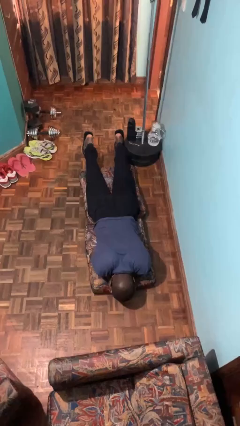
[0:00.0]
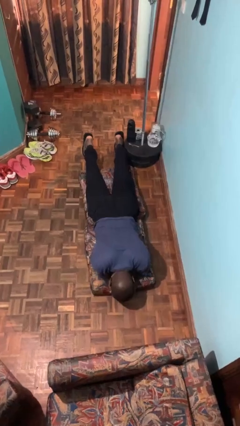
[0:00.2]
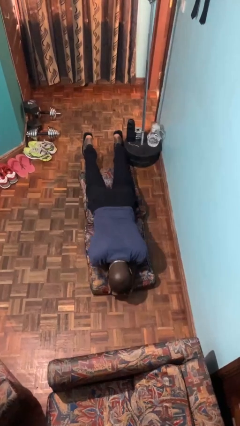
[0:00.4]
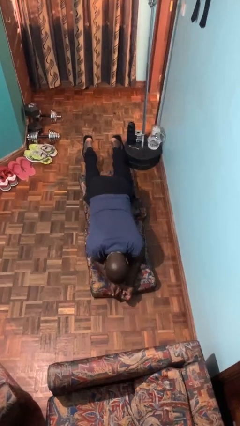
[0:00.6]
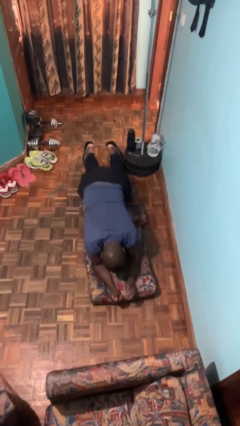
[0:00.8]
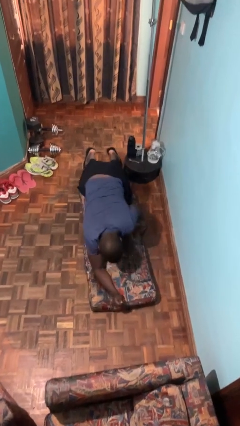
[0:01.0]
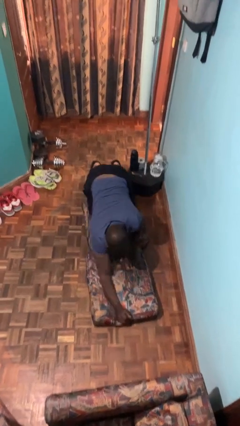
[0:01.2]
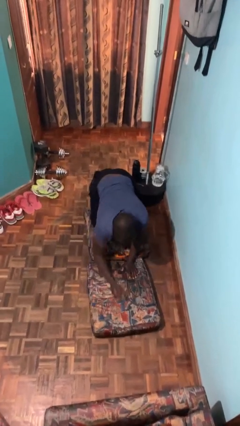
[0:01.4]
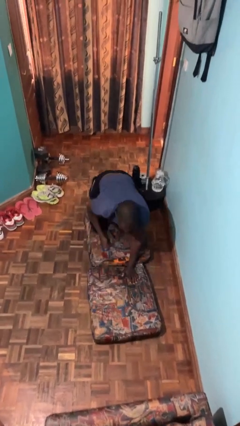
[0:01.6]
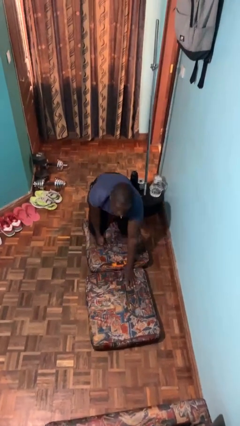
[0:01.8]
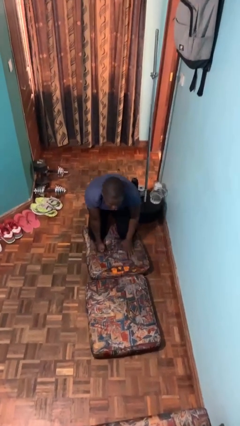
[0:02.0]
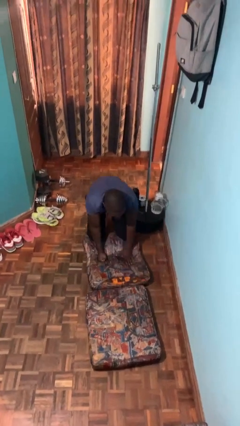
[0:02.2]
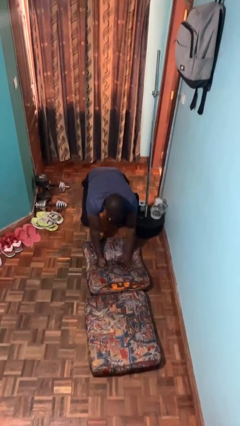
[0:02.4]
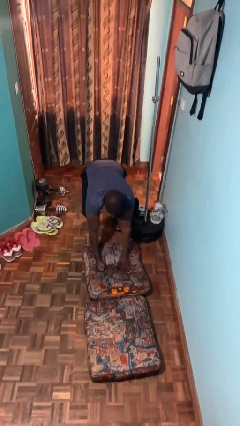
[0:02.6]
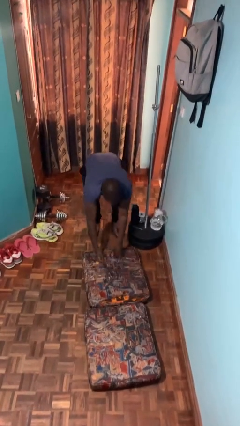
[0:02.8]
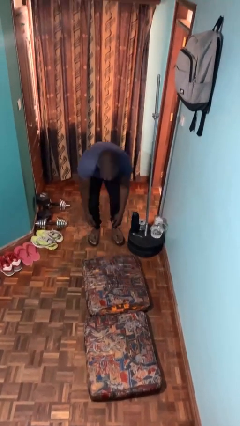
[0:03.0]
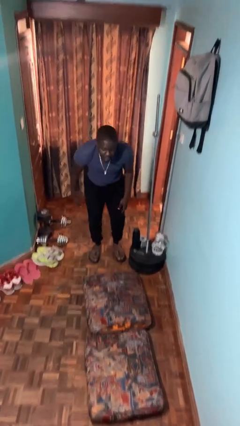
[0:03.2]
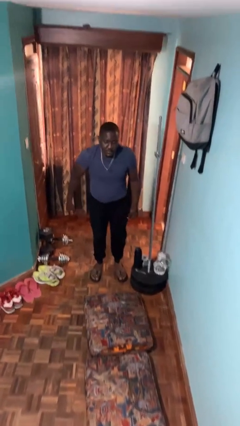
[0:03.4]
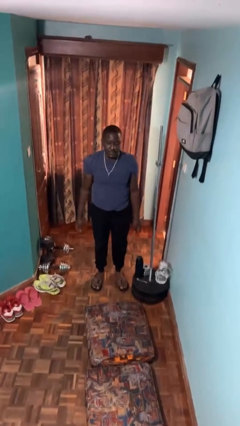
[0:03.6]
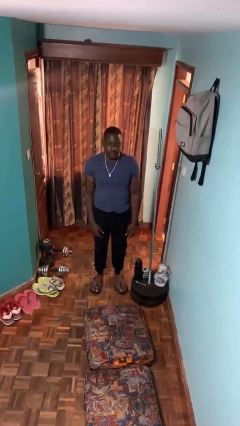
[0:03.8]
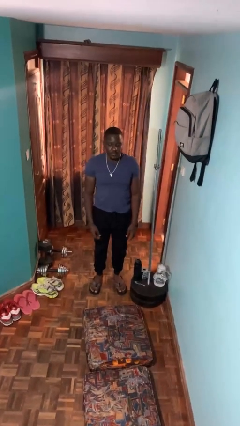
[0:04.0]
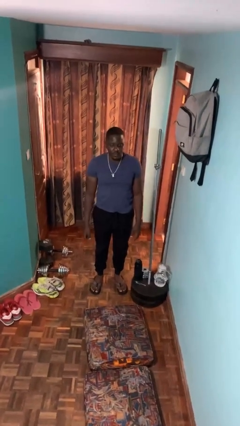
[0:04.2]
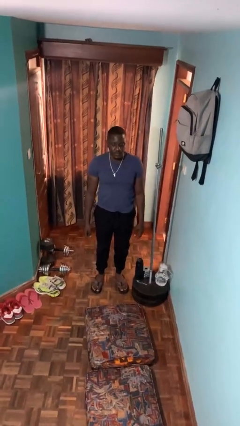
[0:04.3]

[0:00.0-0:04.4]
person stands up from floor

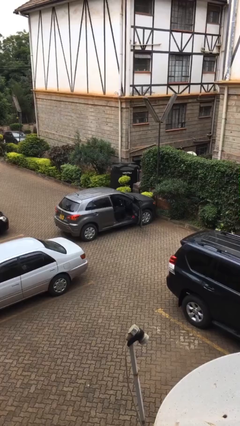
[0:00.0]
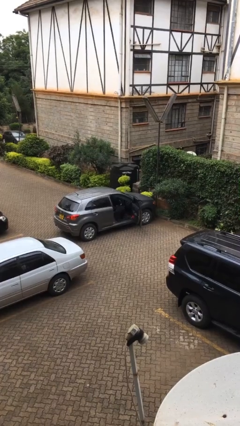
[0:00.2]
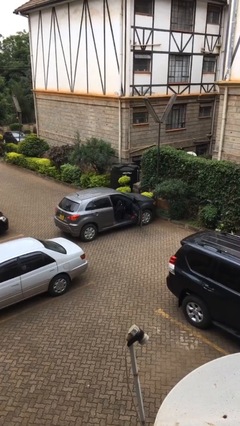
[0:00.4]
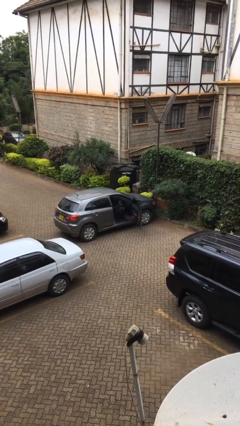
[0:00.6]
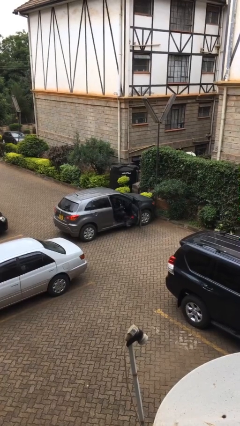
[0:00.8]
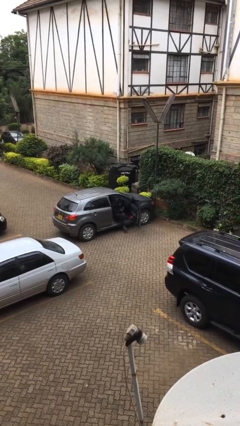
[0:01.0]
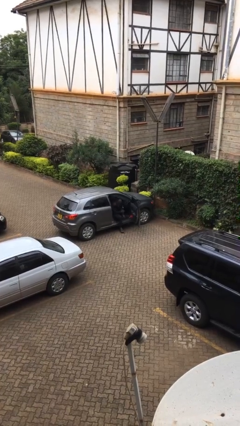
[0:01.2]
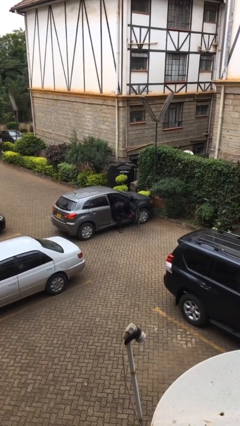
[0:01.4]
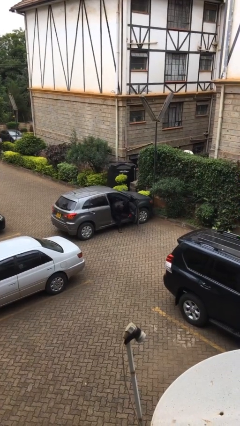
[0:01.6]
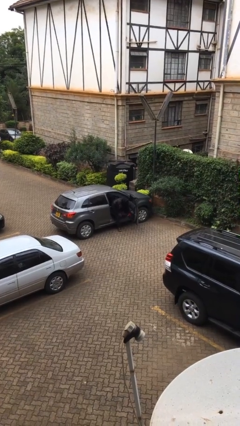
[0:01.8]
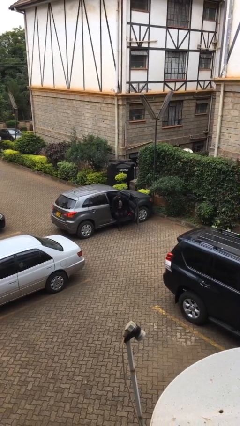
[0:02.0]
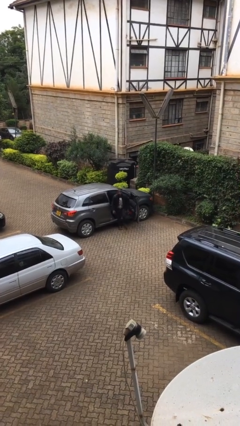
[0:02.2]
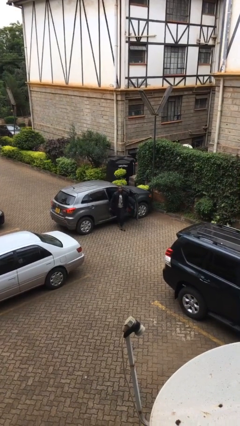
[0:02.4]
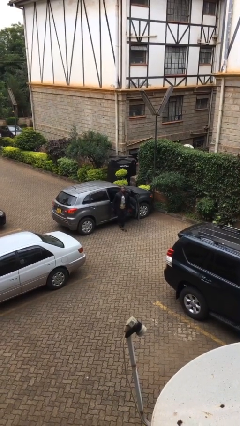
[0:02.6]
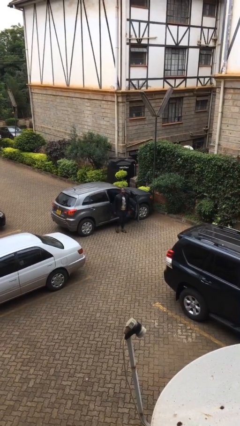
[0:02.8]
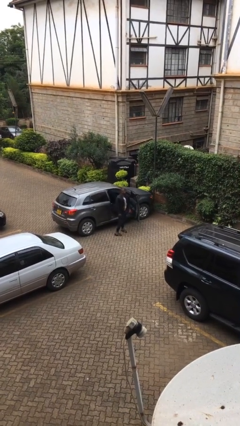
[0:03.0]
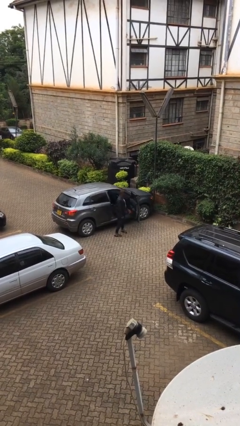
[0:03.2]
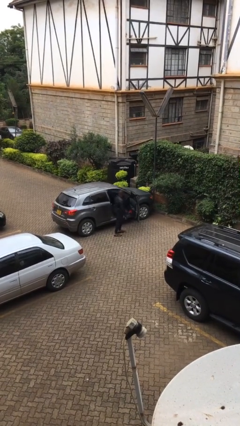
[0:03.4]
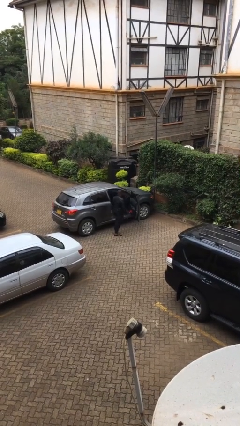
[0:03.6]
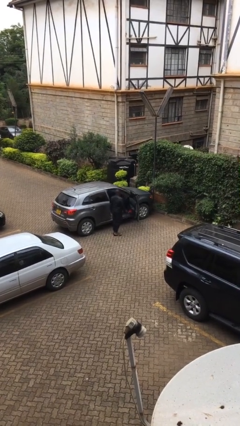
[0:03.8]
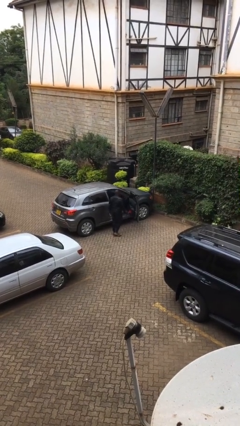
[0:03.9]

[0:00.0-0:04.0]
person exits car

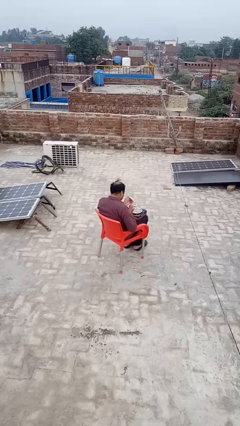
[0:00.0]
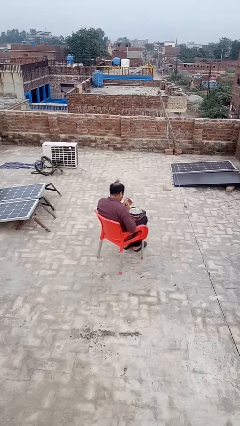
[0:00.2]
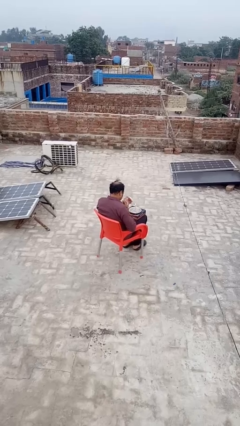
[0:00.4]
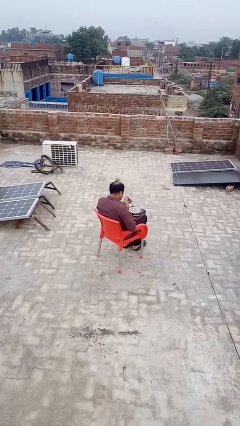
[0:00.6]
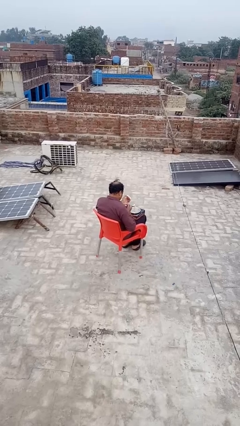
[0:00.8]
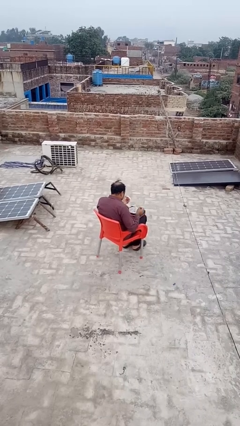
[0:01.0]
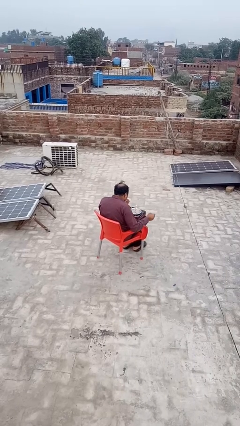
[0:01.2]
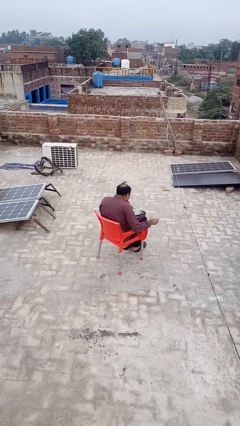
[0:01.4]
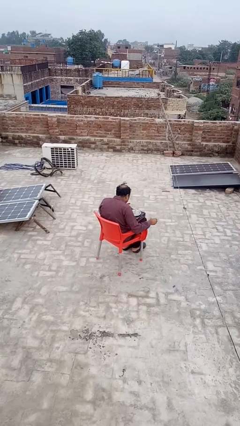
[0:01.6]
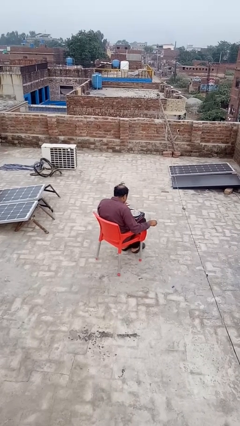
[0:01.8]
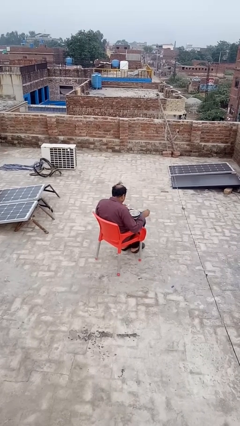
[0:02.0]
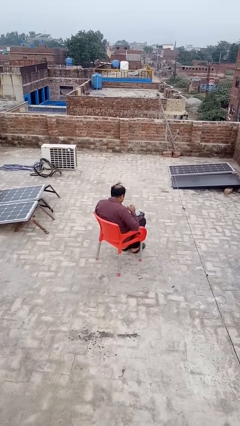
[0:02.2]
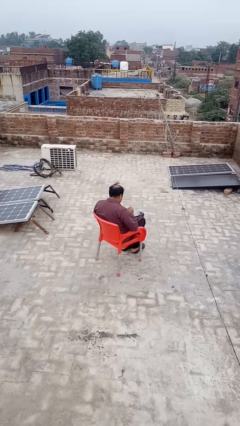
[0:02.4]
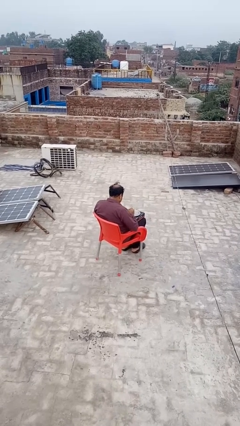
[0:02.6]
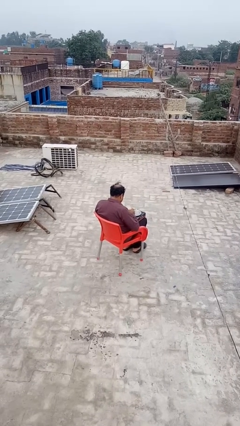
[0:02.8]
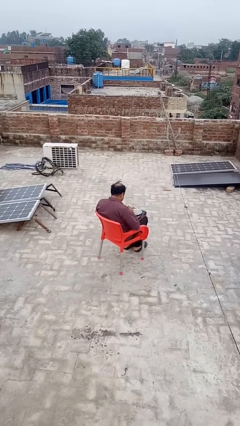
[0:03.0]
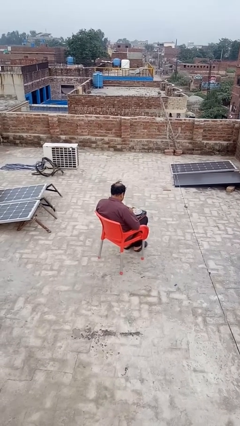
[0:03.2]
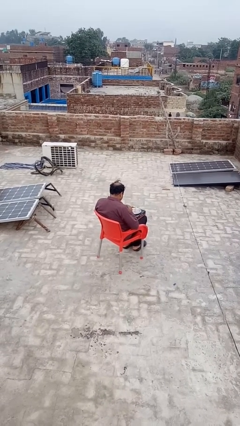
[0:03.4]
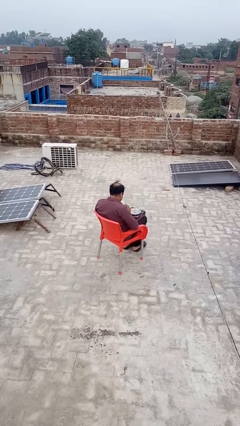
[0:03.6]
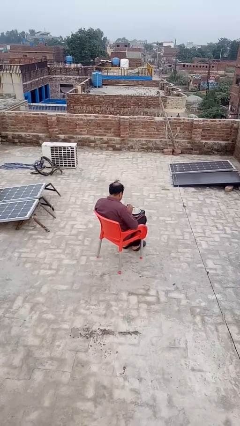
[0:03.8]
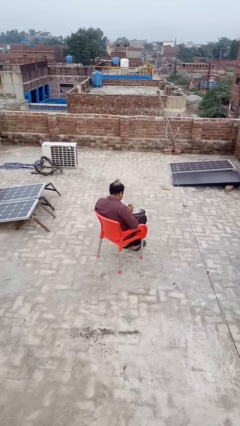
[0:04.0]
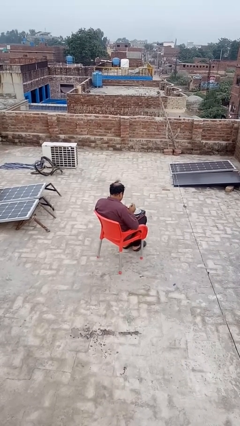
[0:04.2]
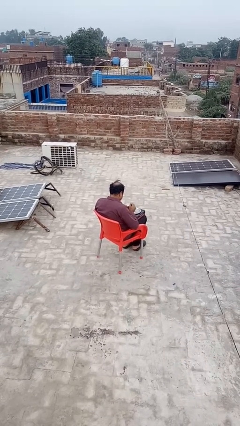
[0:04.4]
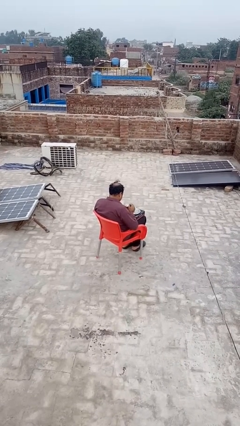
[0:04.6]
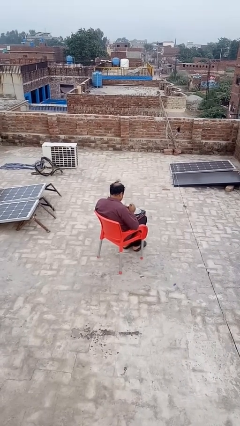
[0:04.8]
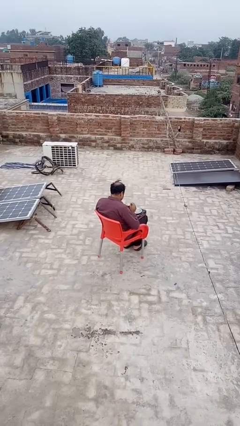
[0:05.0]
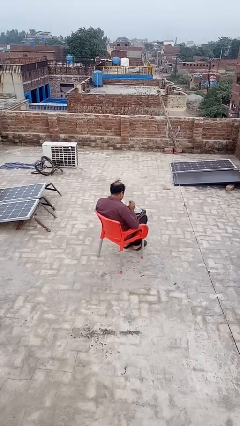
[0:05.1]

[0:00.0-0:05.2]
person extinguishes candle

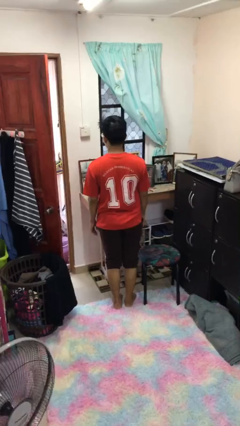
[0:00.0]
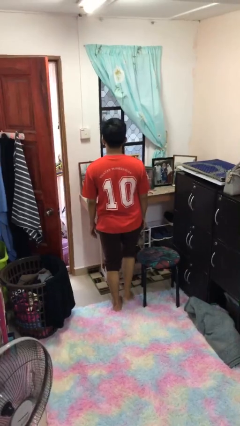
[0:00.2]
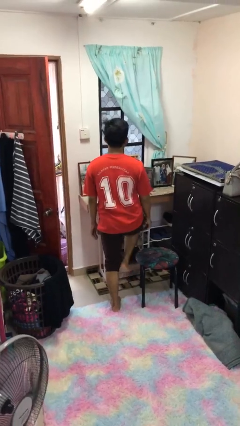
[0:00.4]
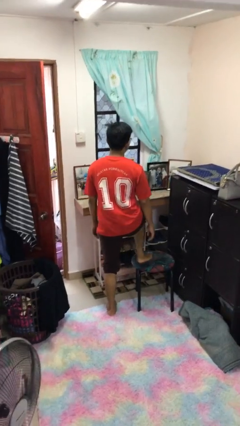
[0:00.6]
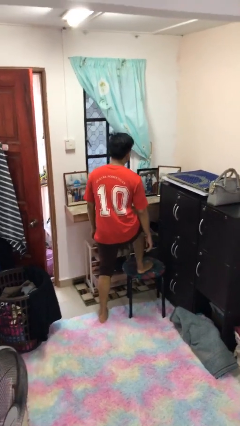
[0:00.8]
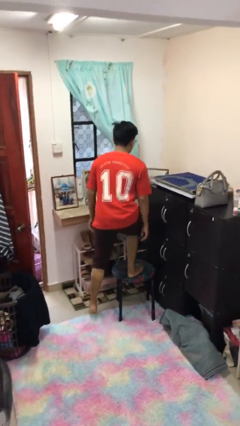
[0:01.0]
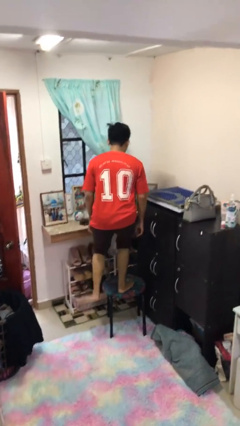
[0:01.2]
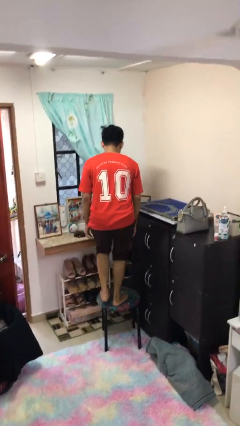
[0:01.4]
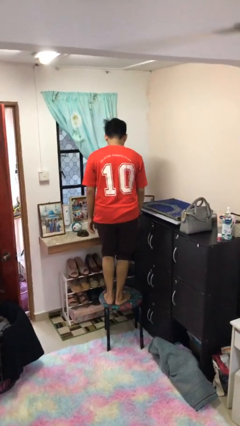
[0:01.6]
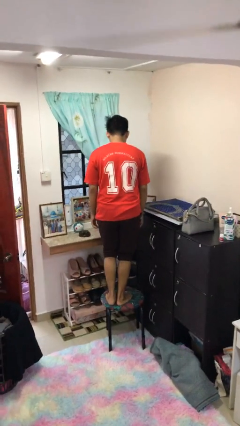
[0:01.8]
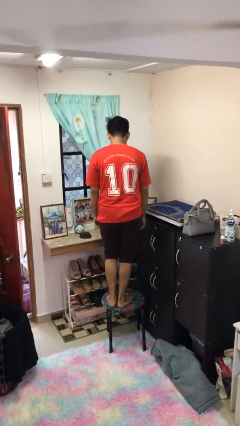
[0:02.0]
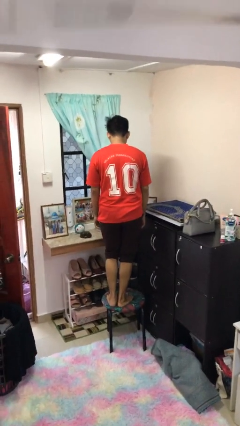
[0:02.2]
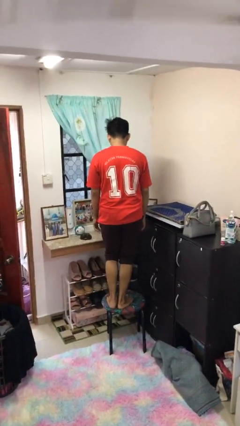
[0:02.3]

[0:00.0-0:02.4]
person climbs on chair

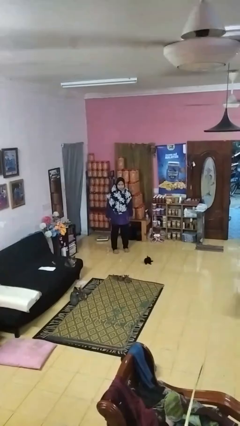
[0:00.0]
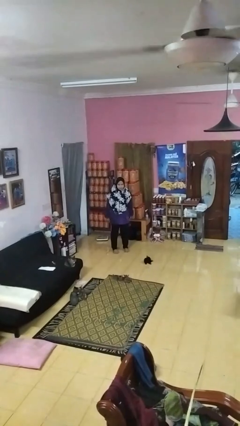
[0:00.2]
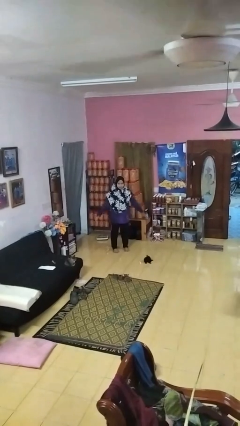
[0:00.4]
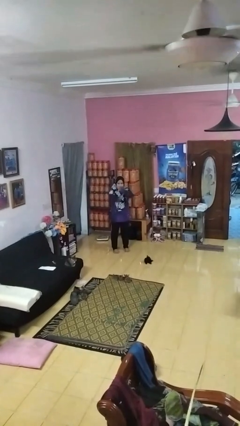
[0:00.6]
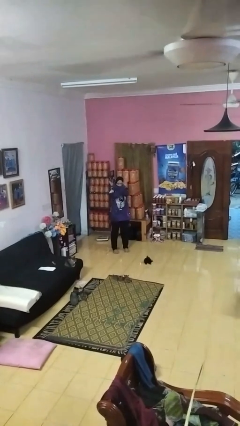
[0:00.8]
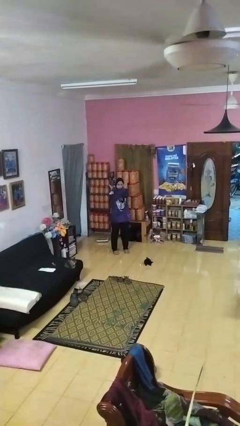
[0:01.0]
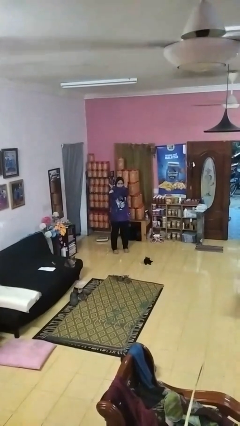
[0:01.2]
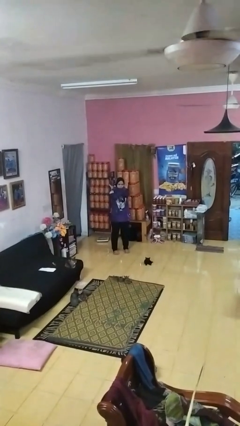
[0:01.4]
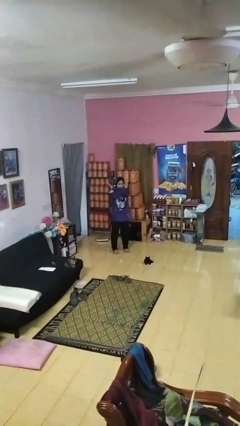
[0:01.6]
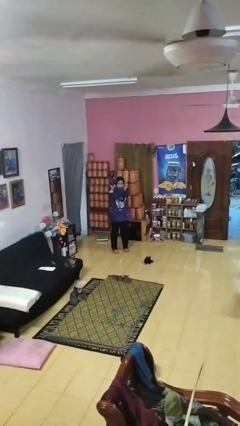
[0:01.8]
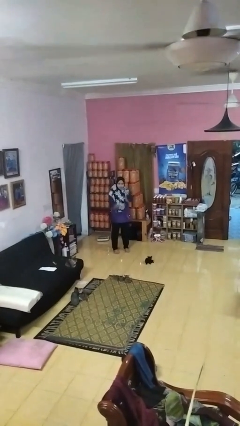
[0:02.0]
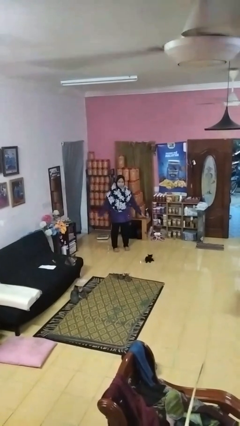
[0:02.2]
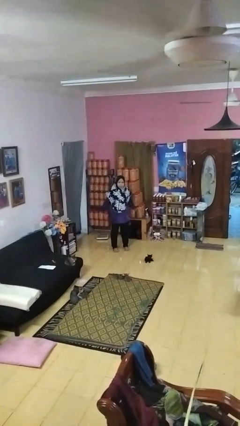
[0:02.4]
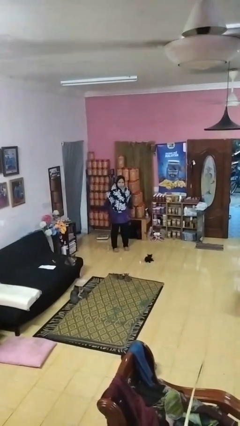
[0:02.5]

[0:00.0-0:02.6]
person gestures arms x
